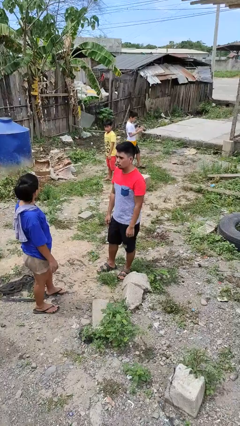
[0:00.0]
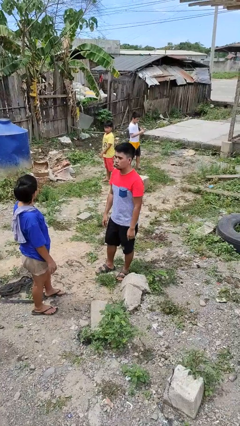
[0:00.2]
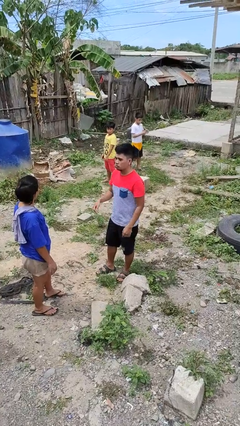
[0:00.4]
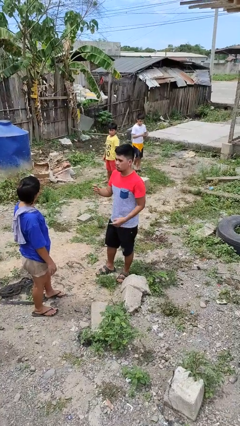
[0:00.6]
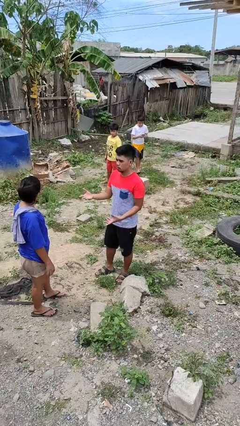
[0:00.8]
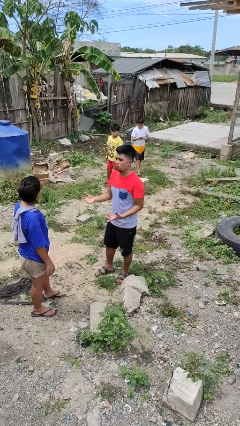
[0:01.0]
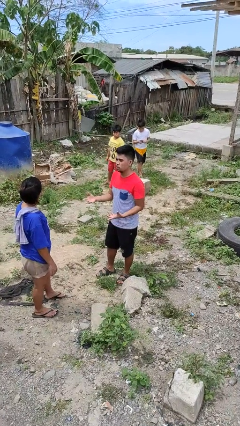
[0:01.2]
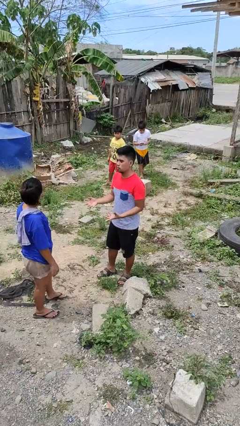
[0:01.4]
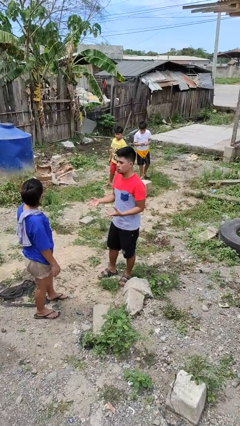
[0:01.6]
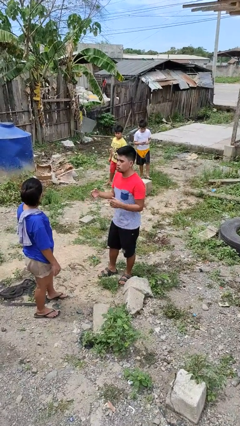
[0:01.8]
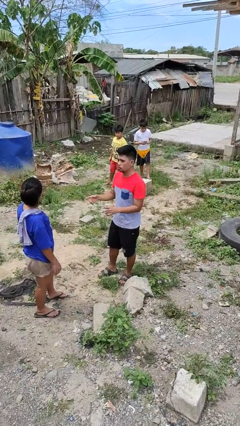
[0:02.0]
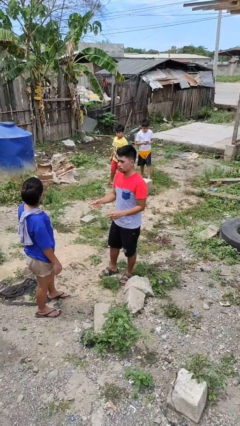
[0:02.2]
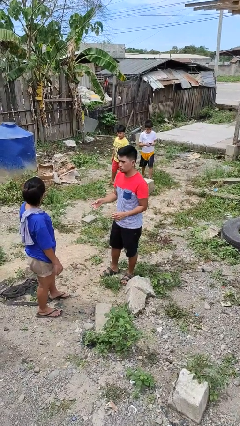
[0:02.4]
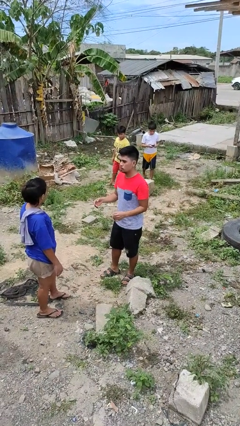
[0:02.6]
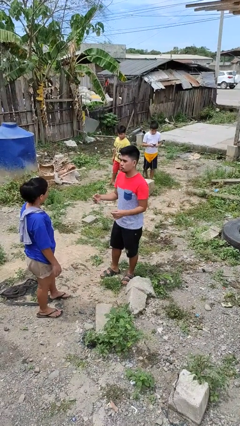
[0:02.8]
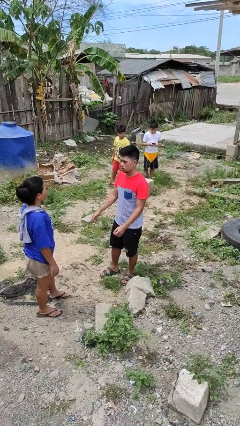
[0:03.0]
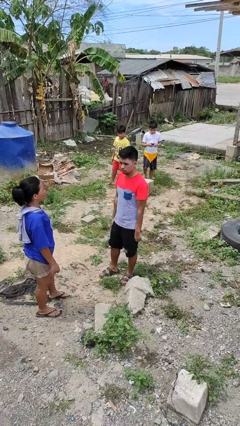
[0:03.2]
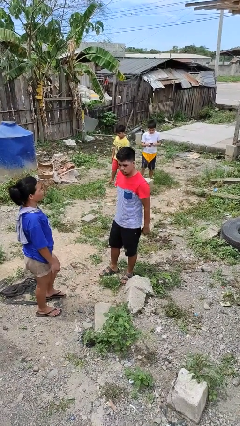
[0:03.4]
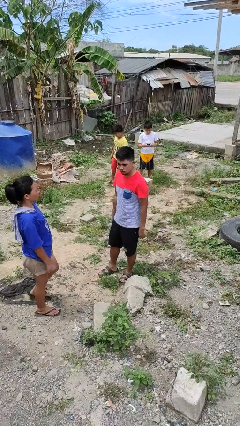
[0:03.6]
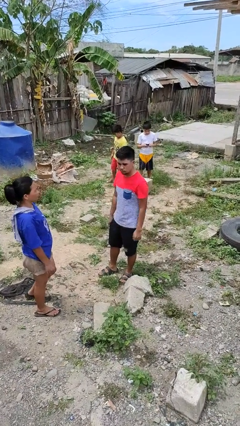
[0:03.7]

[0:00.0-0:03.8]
person talks to person

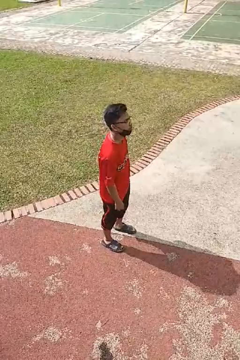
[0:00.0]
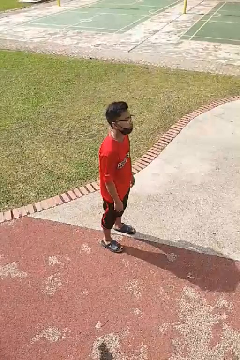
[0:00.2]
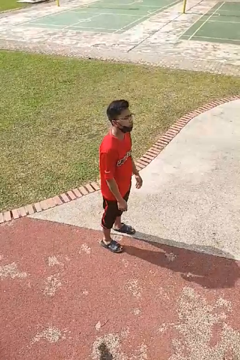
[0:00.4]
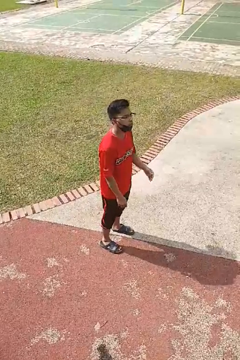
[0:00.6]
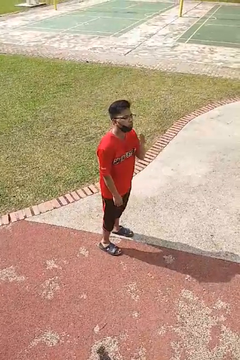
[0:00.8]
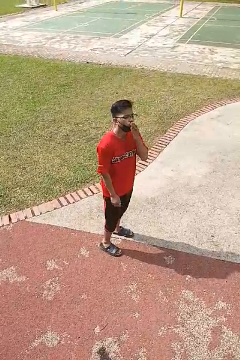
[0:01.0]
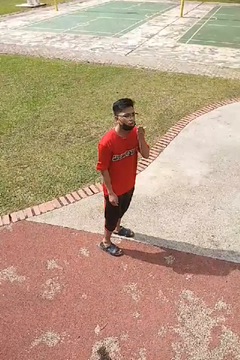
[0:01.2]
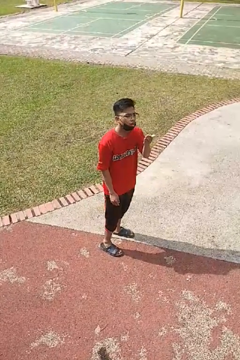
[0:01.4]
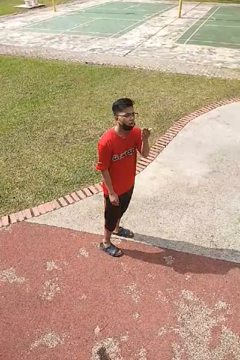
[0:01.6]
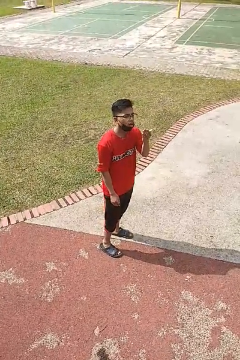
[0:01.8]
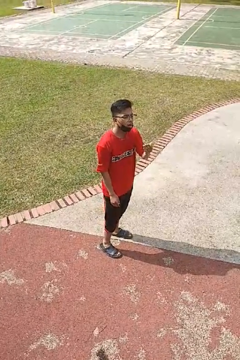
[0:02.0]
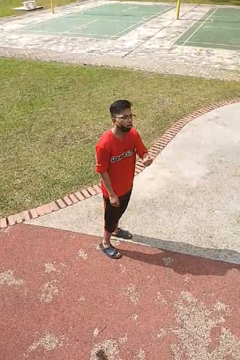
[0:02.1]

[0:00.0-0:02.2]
person gestures blow kiss

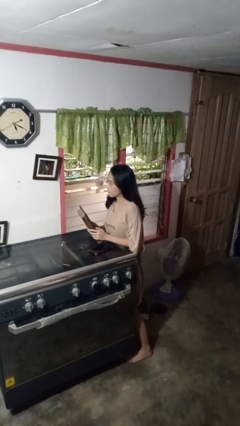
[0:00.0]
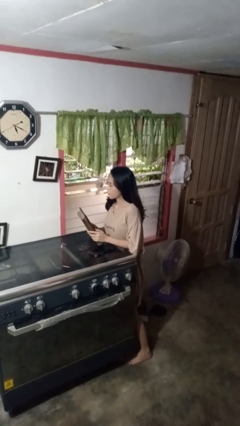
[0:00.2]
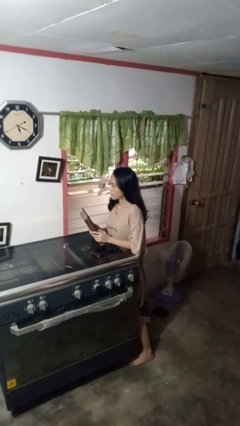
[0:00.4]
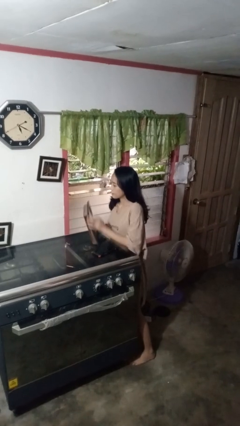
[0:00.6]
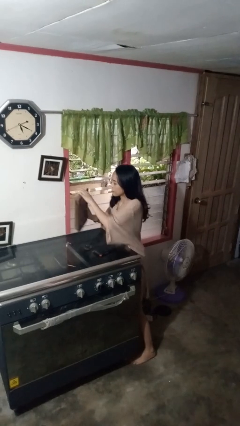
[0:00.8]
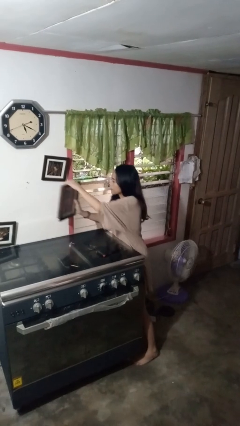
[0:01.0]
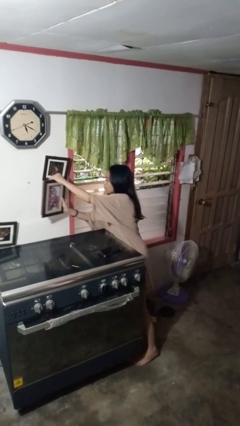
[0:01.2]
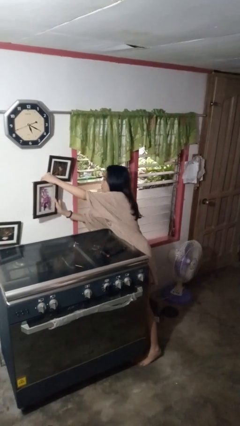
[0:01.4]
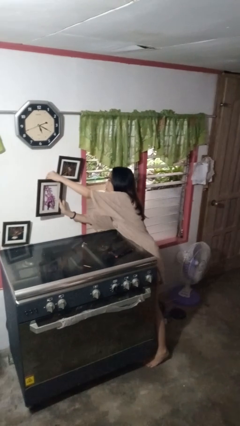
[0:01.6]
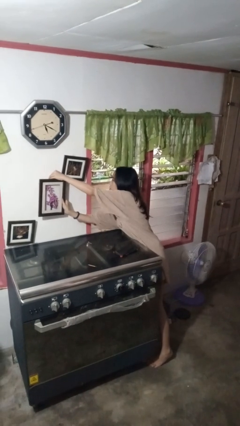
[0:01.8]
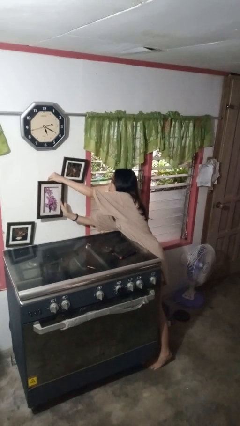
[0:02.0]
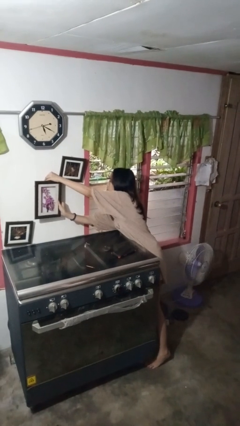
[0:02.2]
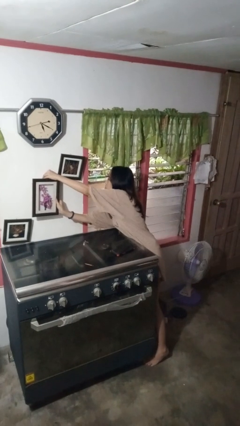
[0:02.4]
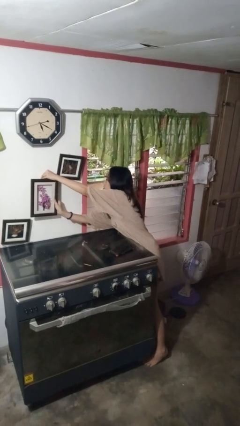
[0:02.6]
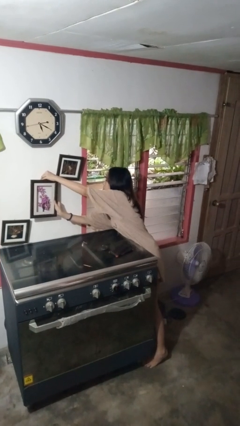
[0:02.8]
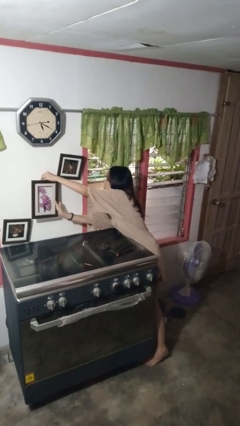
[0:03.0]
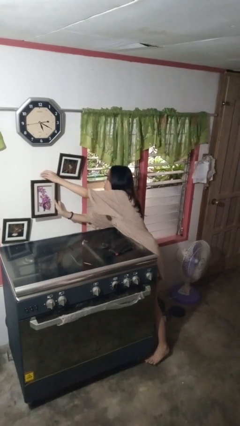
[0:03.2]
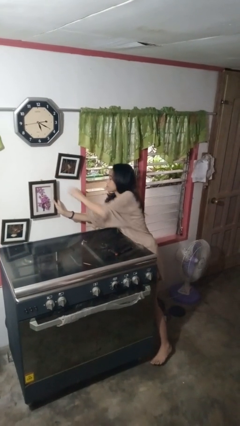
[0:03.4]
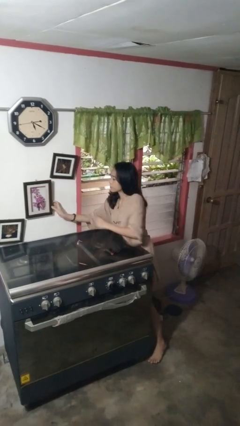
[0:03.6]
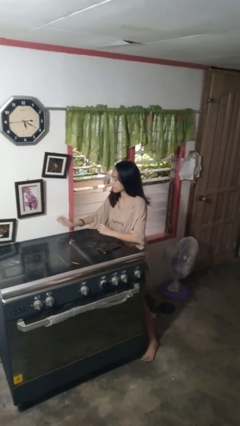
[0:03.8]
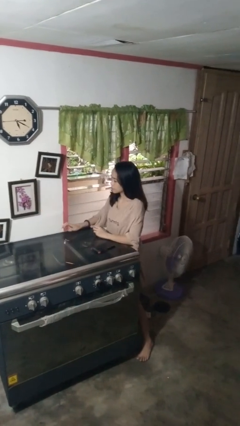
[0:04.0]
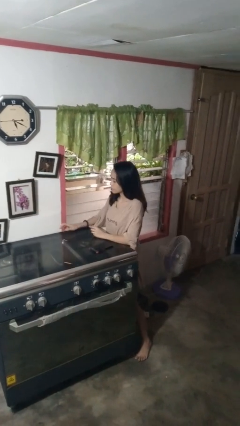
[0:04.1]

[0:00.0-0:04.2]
person puts up picture frame

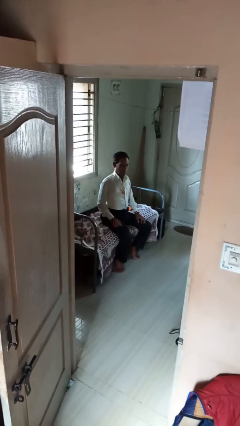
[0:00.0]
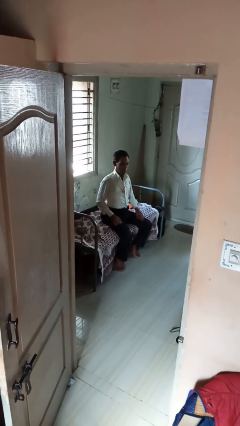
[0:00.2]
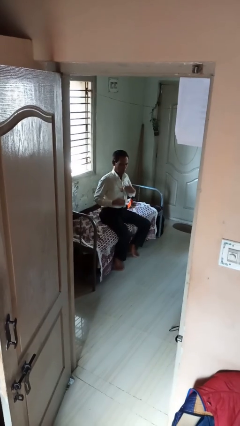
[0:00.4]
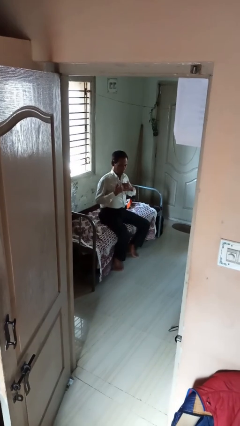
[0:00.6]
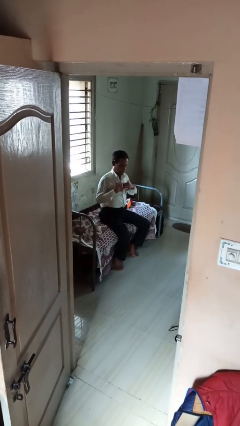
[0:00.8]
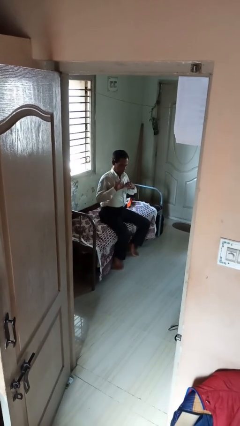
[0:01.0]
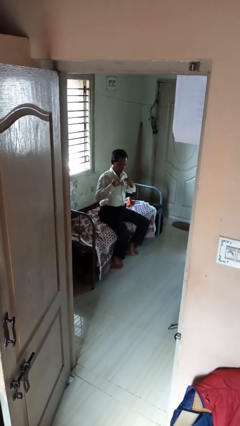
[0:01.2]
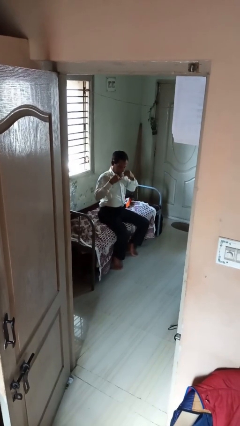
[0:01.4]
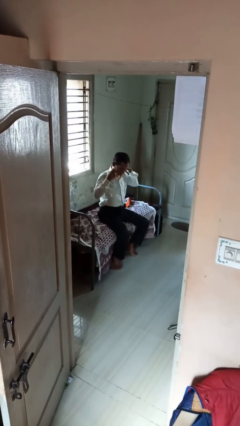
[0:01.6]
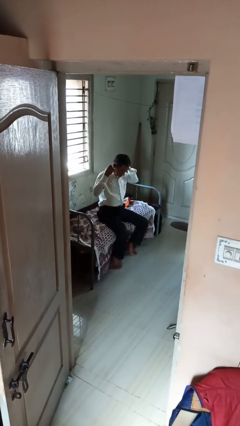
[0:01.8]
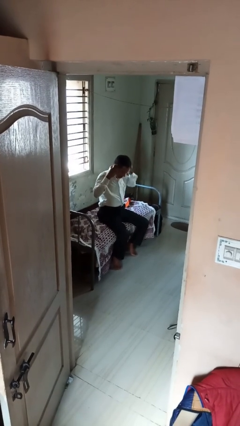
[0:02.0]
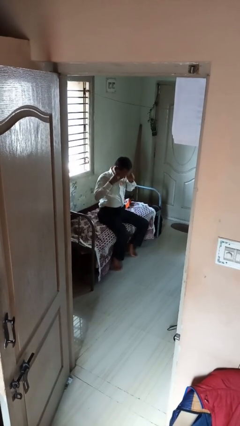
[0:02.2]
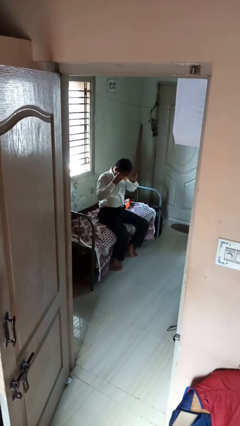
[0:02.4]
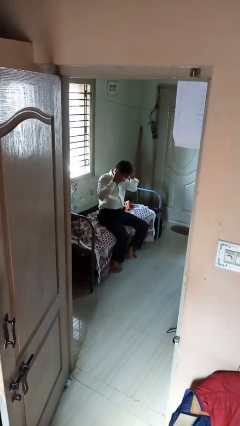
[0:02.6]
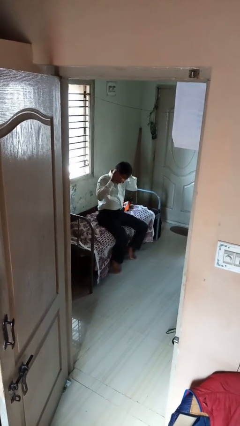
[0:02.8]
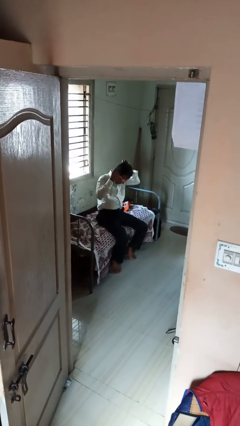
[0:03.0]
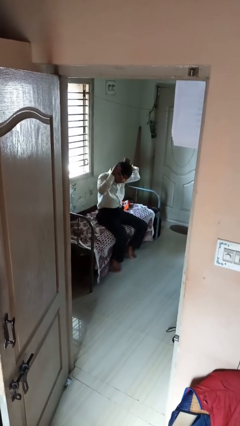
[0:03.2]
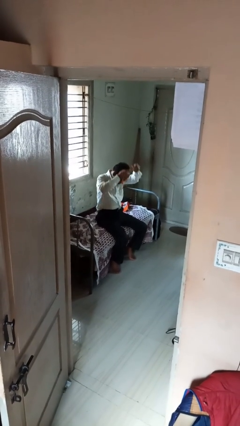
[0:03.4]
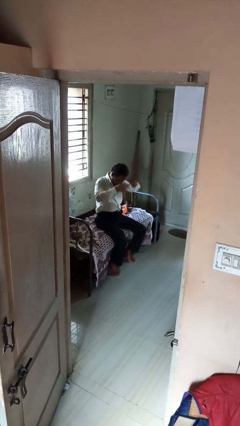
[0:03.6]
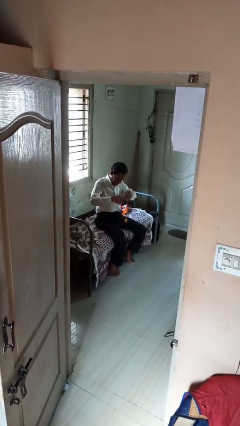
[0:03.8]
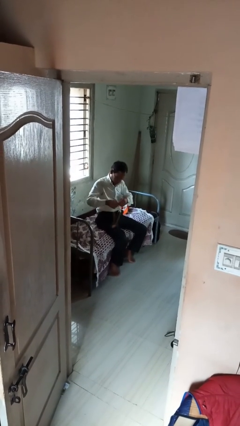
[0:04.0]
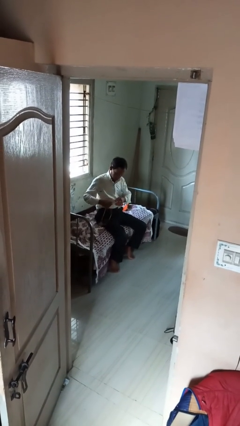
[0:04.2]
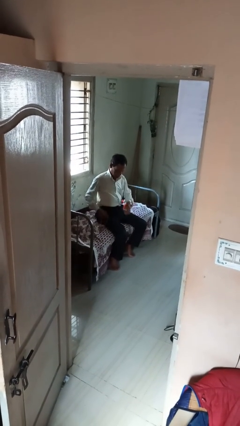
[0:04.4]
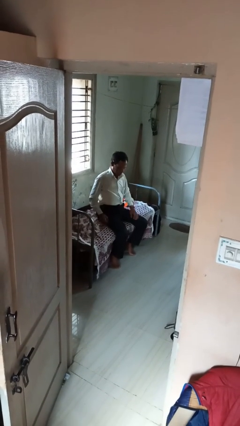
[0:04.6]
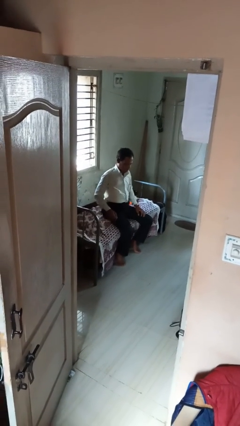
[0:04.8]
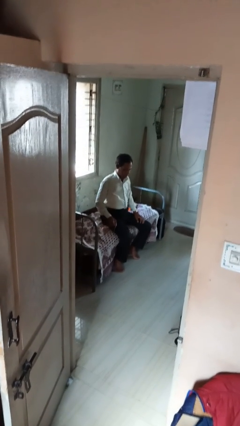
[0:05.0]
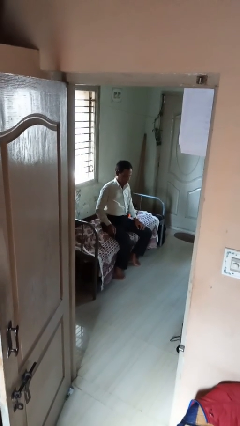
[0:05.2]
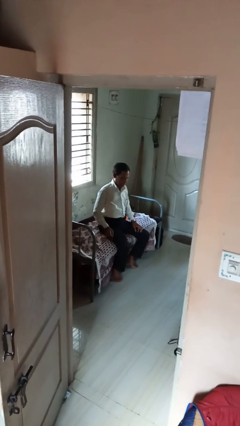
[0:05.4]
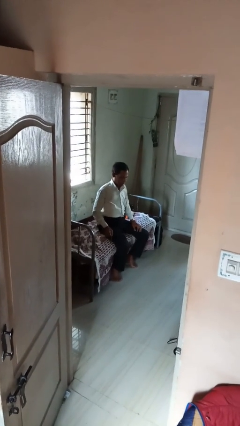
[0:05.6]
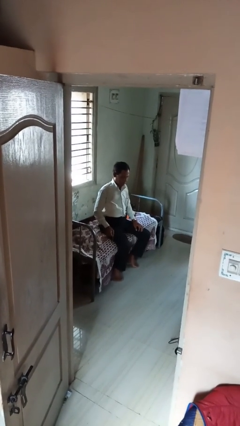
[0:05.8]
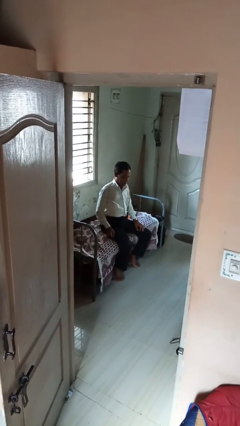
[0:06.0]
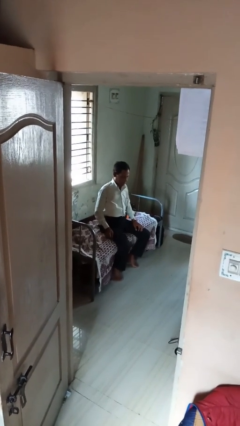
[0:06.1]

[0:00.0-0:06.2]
person takes off necklace

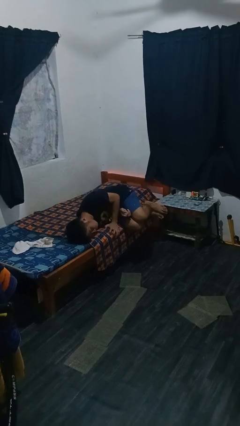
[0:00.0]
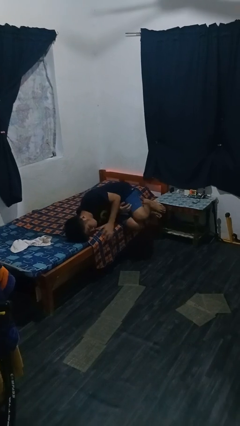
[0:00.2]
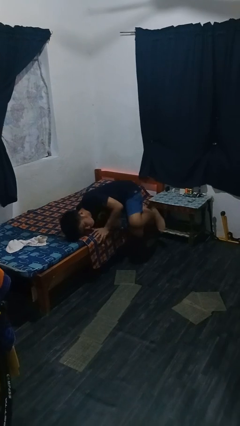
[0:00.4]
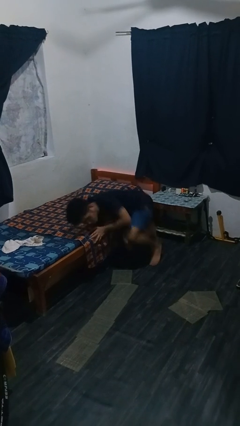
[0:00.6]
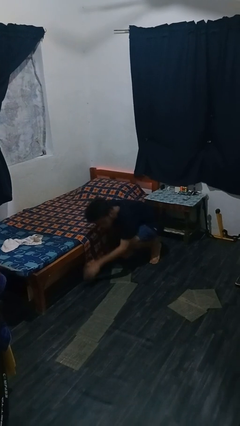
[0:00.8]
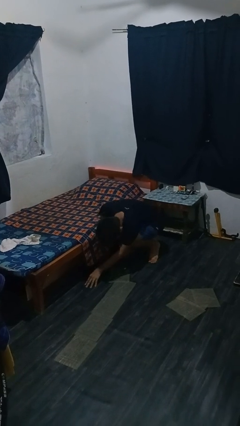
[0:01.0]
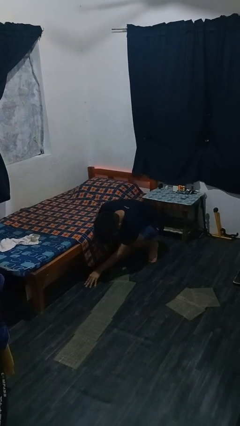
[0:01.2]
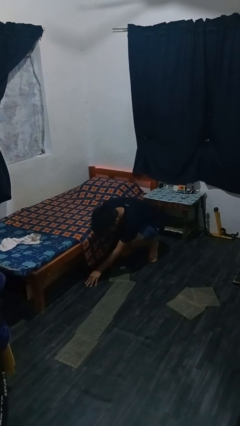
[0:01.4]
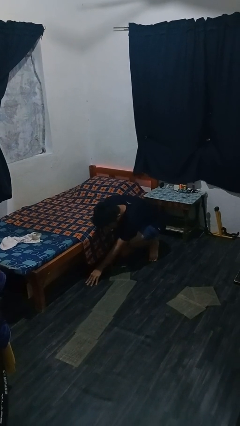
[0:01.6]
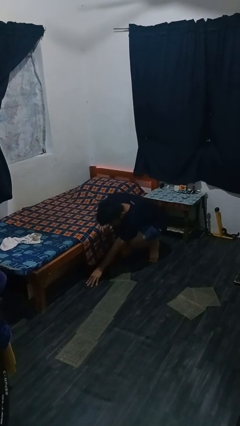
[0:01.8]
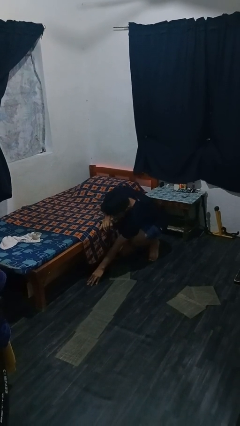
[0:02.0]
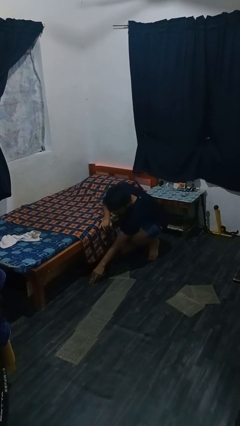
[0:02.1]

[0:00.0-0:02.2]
person falls from bed
